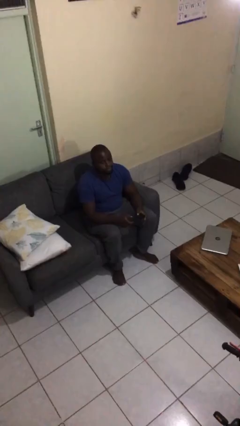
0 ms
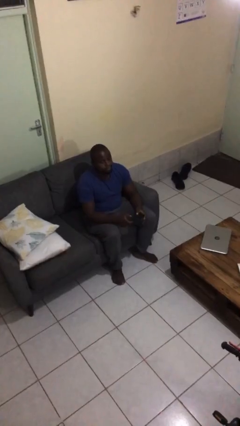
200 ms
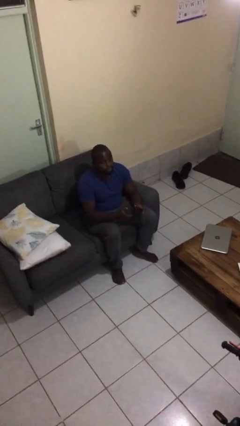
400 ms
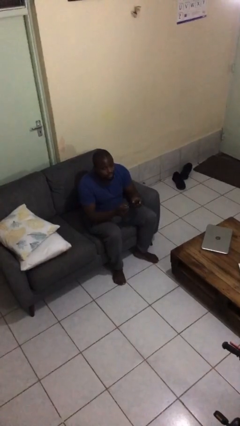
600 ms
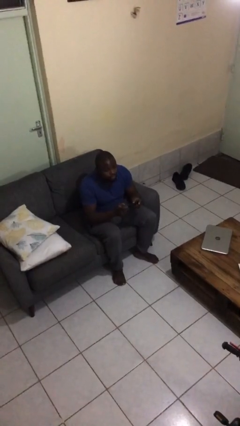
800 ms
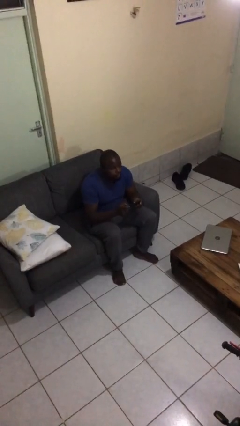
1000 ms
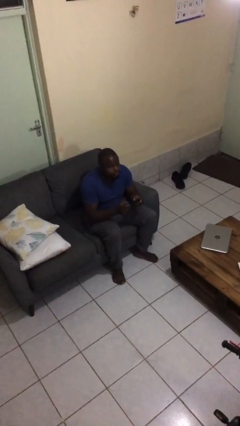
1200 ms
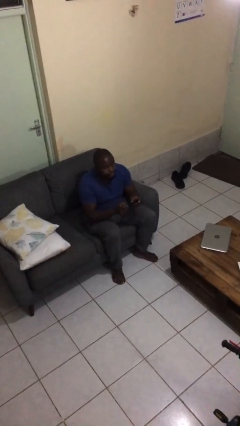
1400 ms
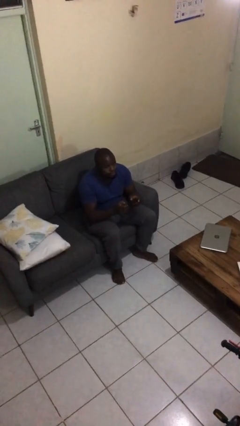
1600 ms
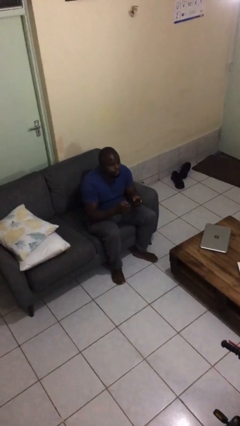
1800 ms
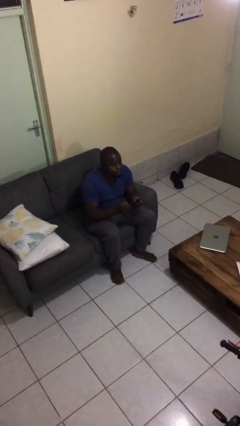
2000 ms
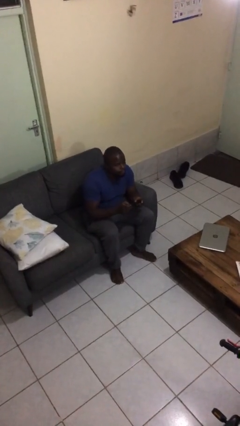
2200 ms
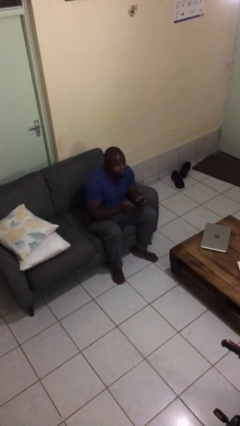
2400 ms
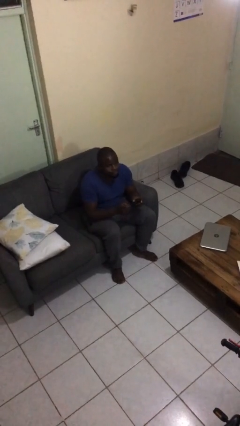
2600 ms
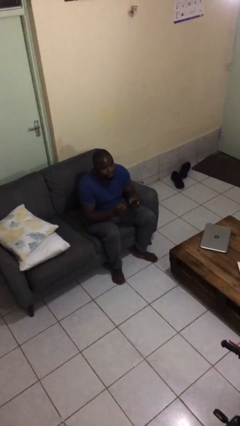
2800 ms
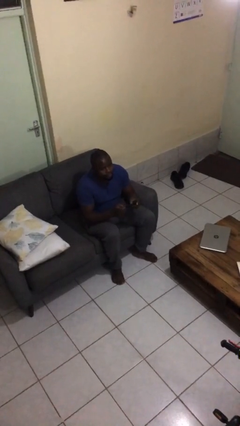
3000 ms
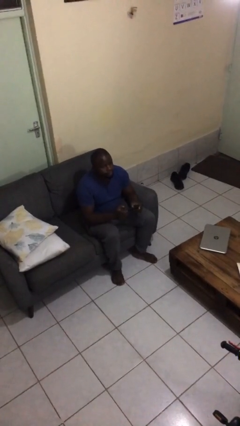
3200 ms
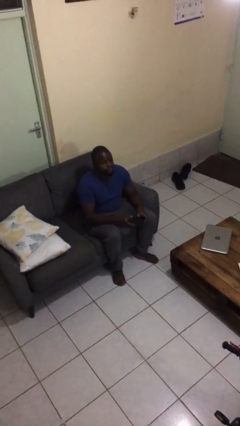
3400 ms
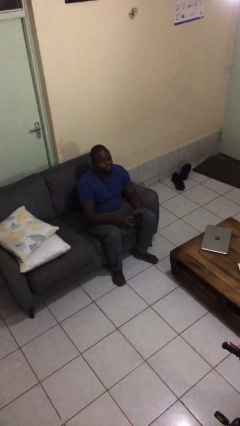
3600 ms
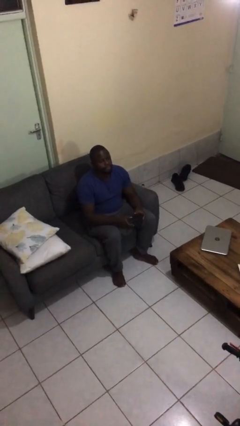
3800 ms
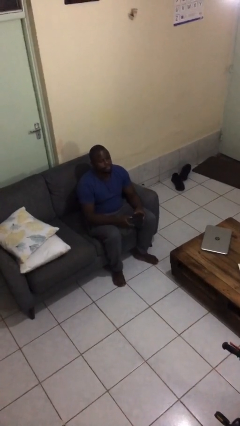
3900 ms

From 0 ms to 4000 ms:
person interacts with handheld game

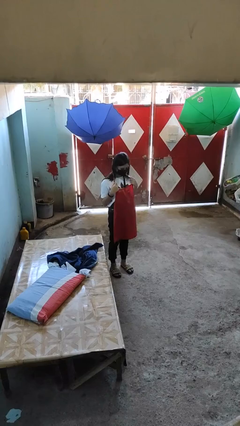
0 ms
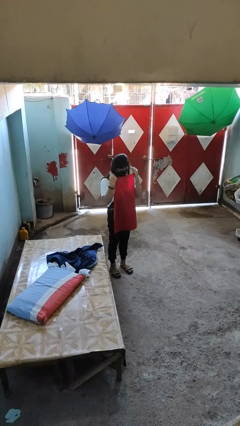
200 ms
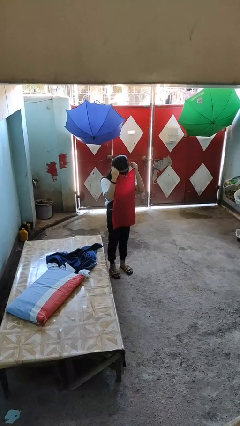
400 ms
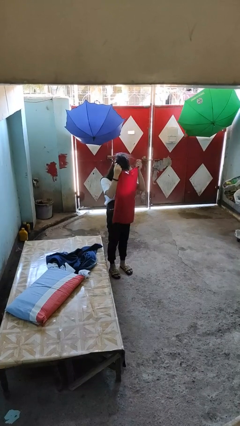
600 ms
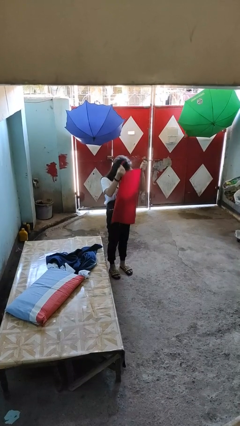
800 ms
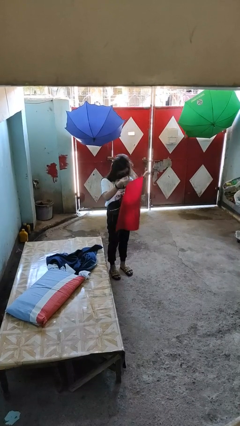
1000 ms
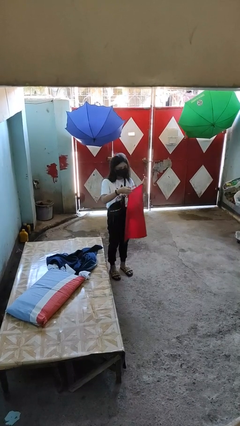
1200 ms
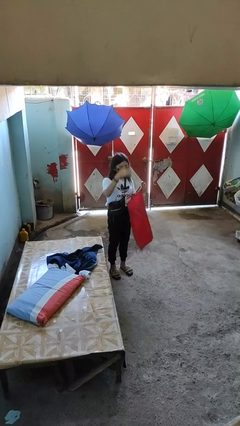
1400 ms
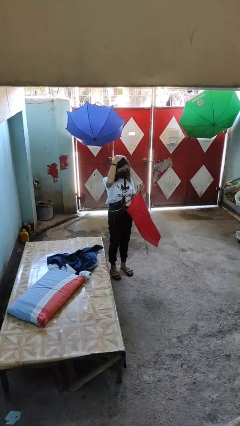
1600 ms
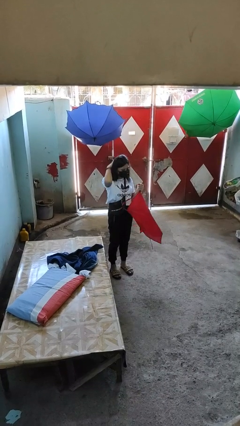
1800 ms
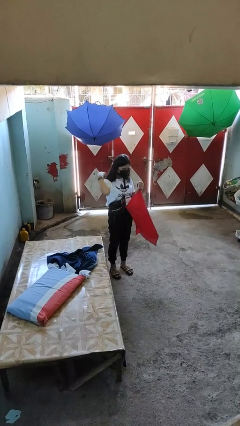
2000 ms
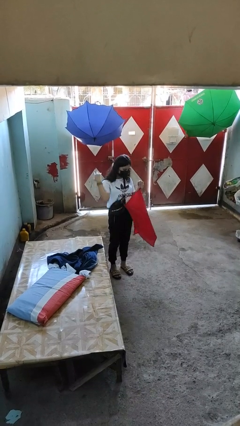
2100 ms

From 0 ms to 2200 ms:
person takes off apron

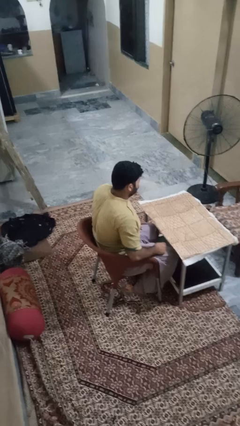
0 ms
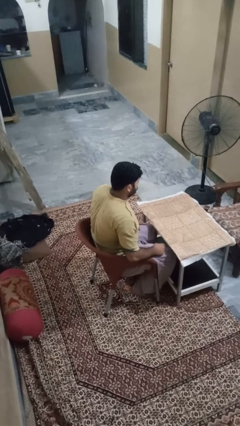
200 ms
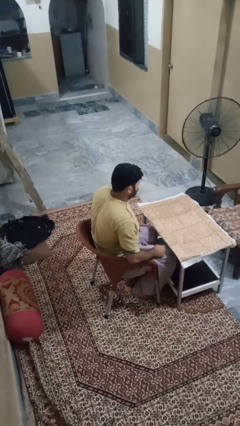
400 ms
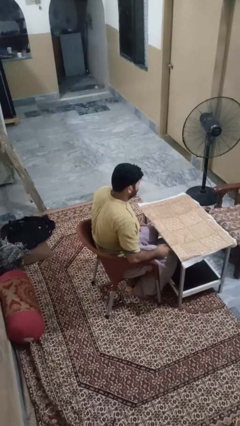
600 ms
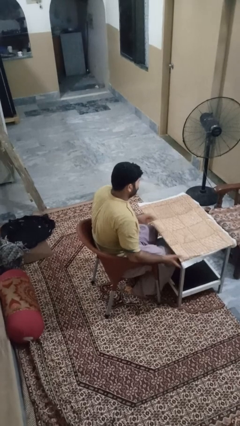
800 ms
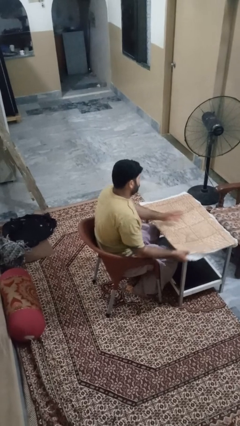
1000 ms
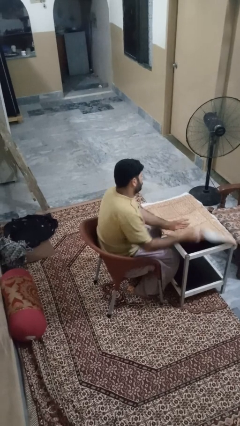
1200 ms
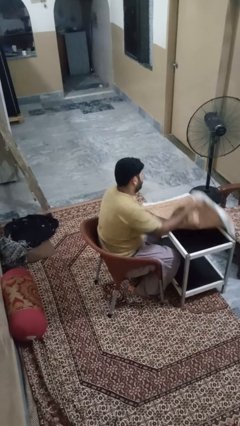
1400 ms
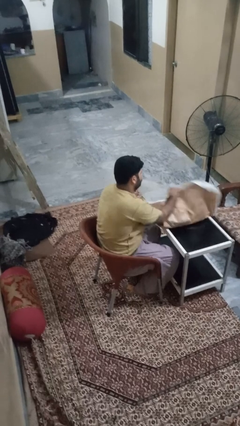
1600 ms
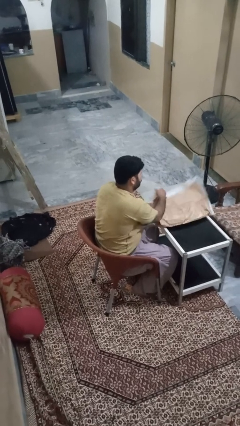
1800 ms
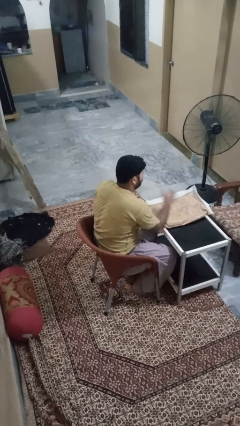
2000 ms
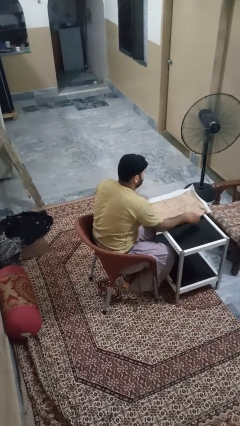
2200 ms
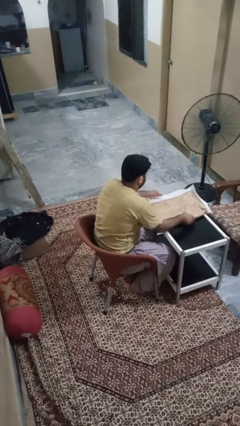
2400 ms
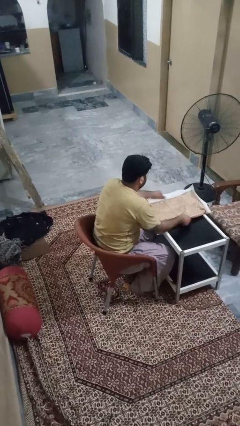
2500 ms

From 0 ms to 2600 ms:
person folds tablecloth

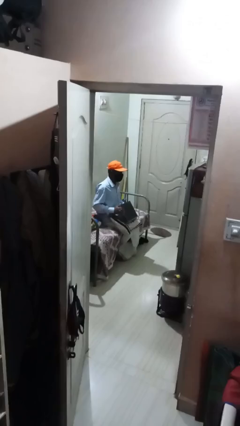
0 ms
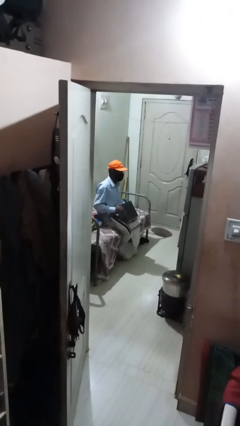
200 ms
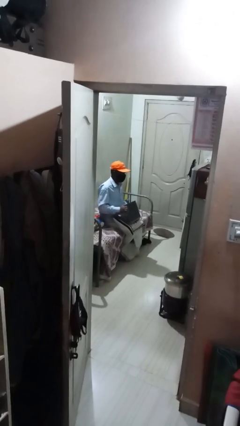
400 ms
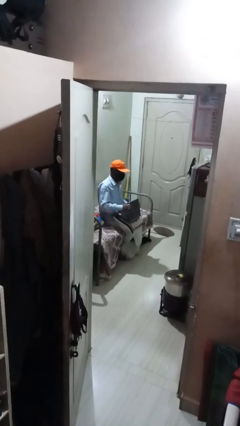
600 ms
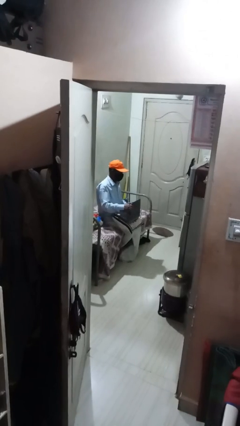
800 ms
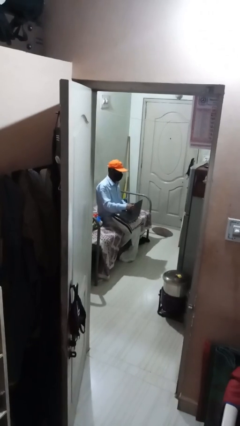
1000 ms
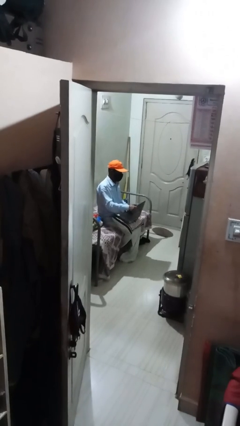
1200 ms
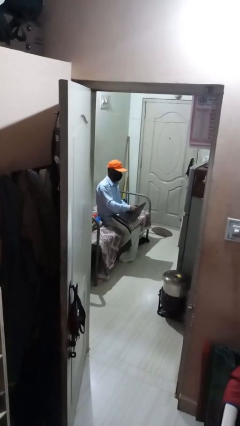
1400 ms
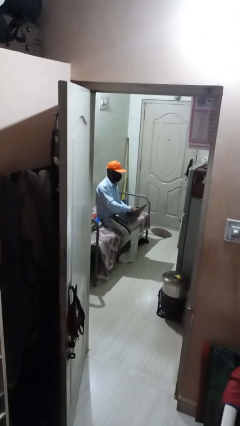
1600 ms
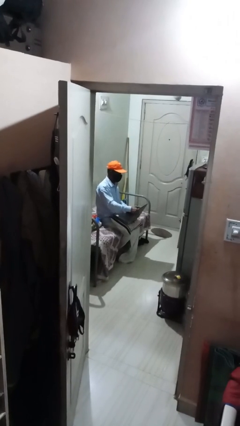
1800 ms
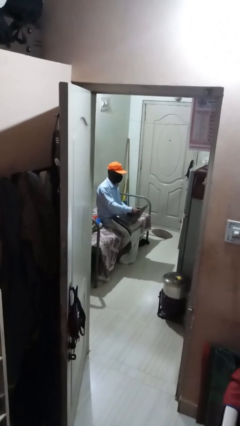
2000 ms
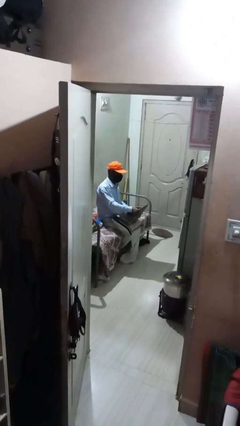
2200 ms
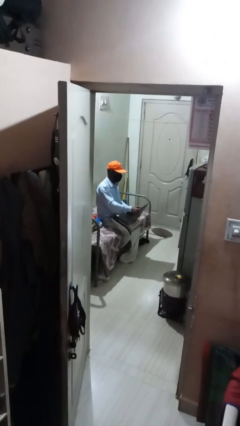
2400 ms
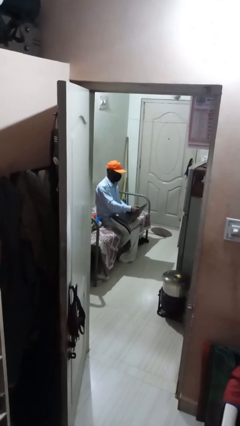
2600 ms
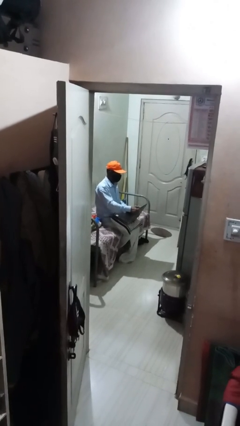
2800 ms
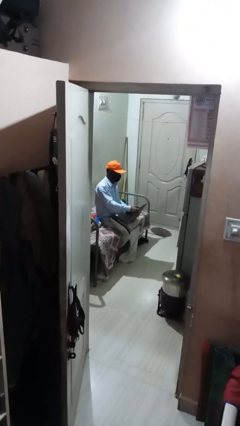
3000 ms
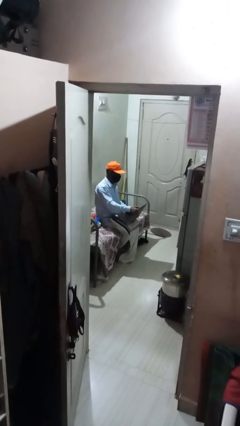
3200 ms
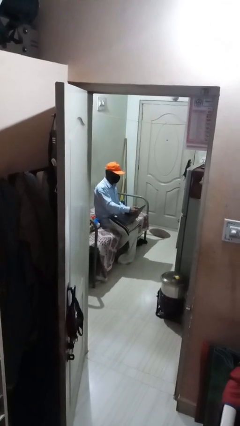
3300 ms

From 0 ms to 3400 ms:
person interacts with laptop

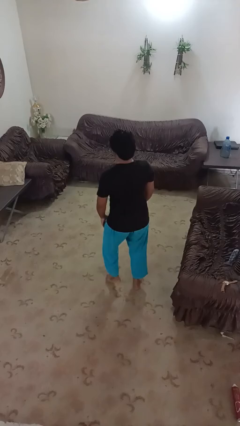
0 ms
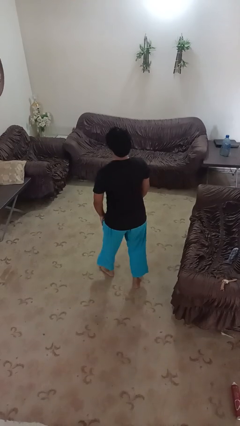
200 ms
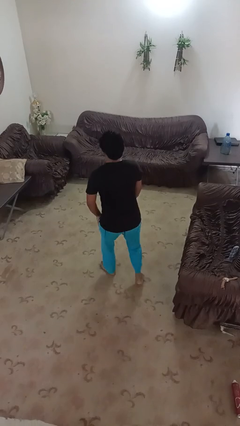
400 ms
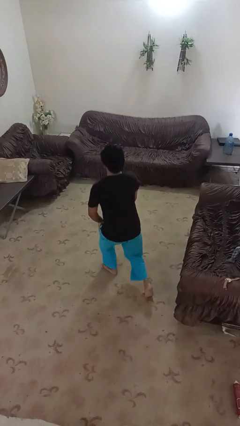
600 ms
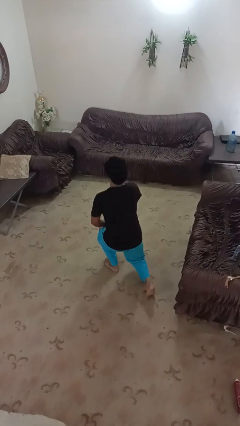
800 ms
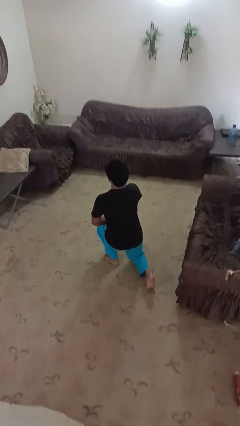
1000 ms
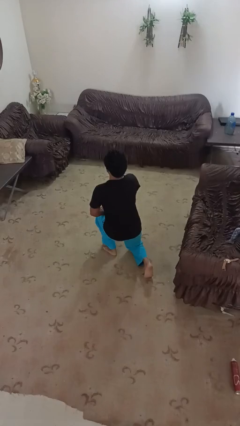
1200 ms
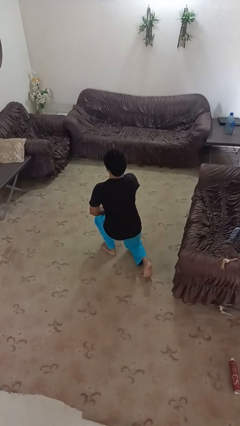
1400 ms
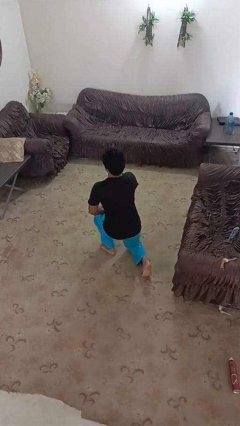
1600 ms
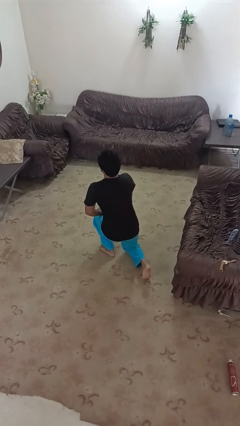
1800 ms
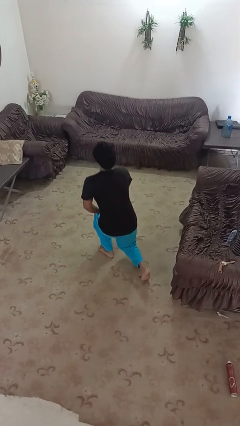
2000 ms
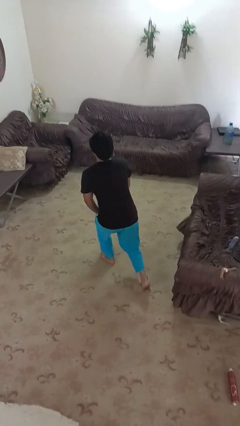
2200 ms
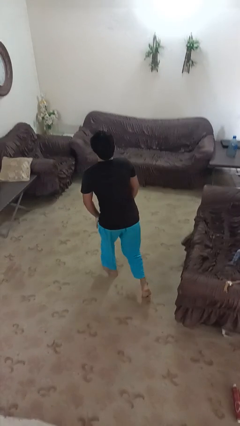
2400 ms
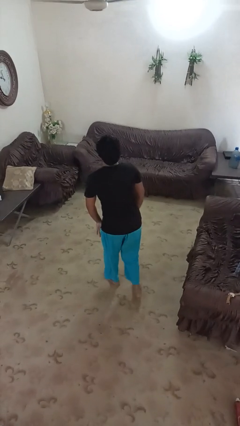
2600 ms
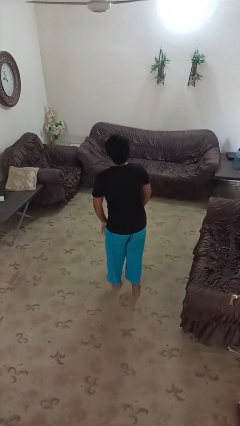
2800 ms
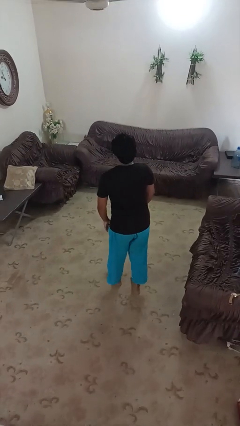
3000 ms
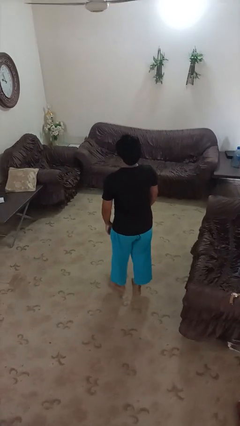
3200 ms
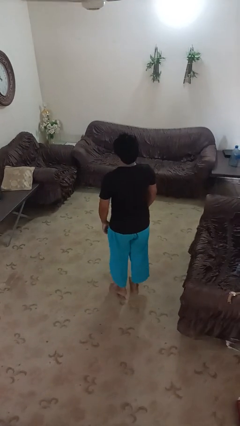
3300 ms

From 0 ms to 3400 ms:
person exercises with lunges

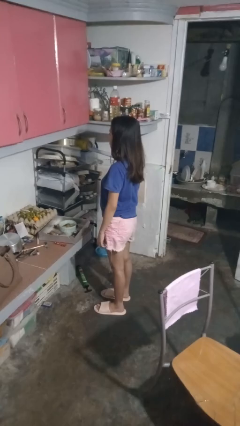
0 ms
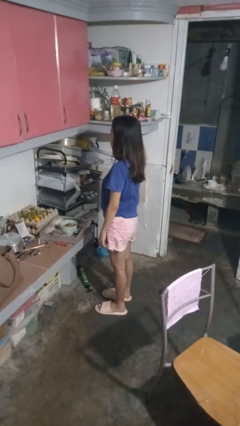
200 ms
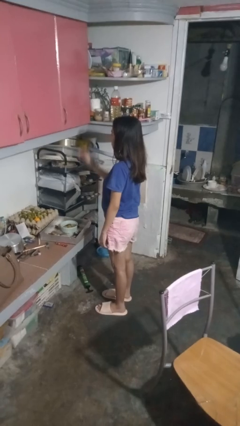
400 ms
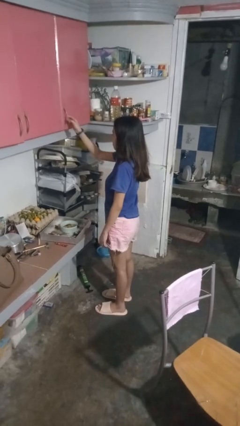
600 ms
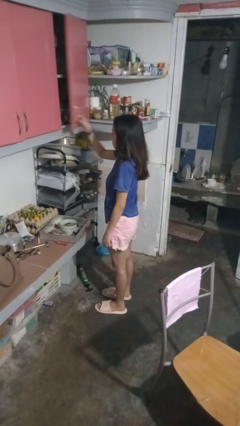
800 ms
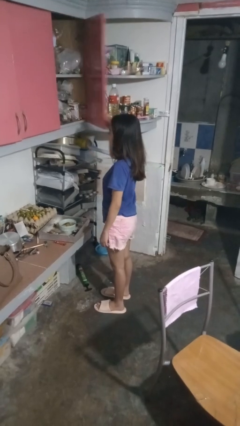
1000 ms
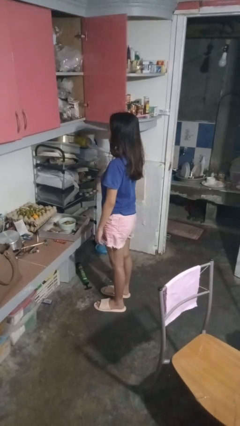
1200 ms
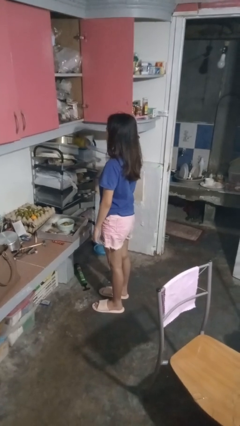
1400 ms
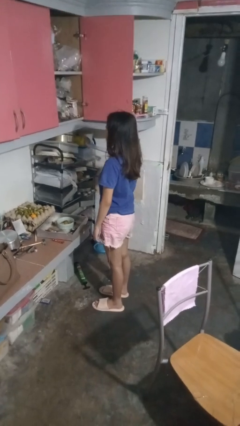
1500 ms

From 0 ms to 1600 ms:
person opens cabinet

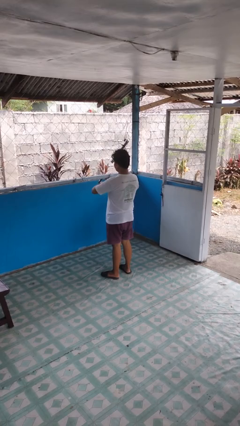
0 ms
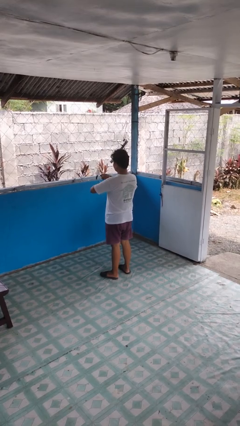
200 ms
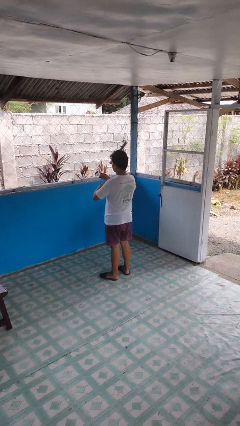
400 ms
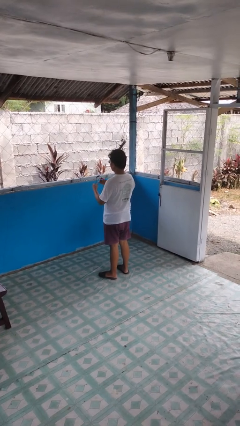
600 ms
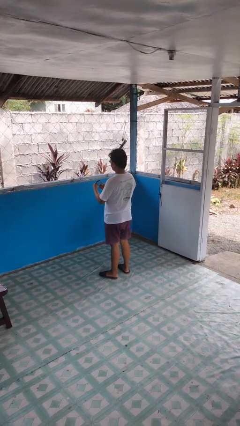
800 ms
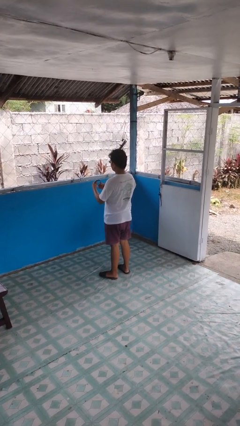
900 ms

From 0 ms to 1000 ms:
person takes off wristwatch
